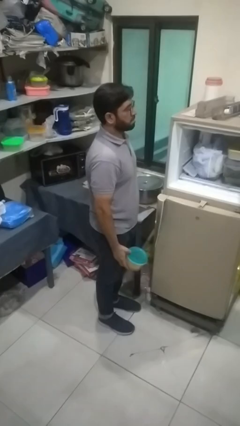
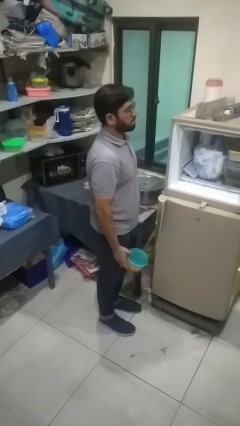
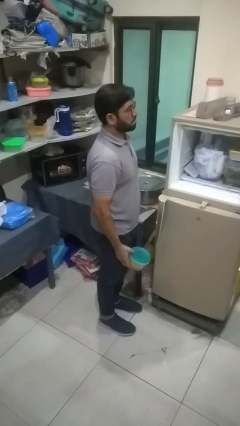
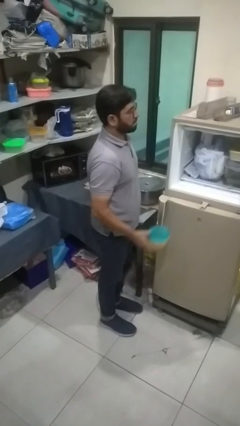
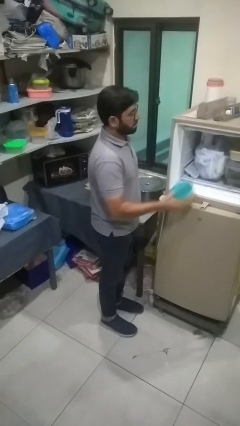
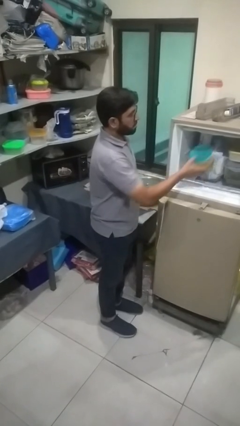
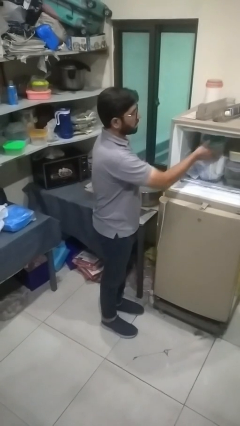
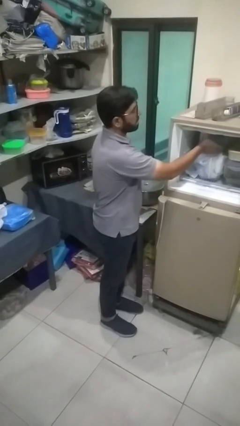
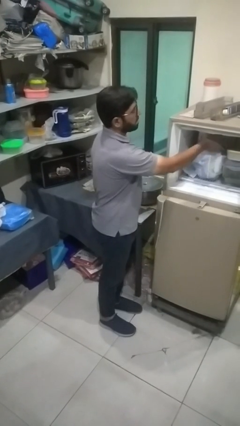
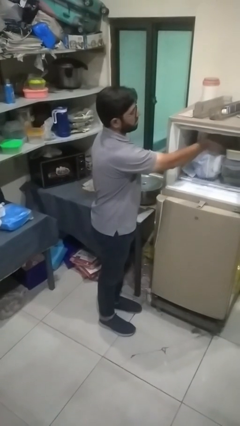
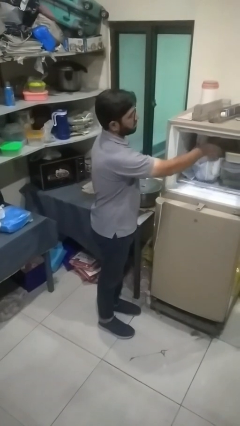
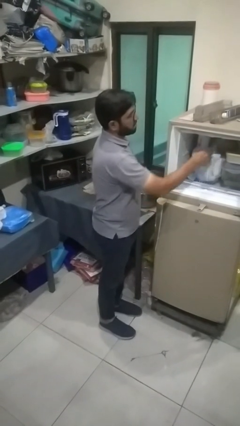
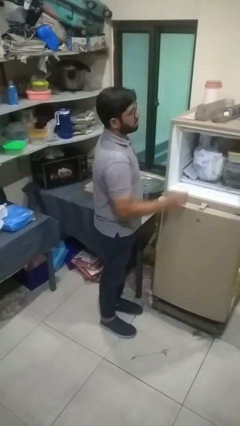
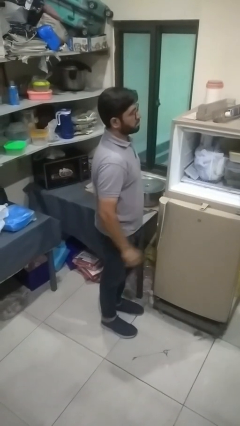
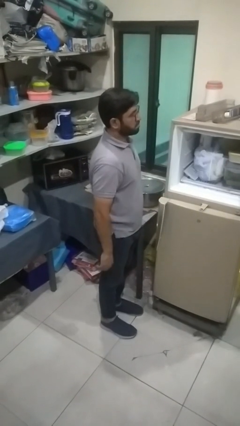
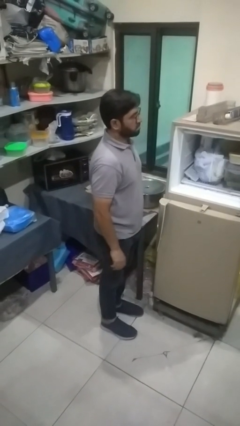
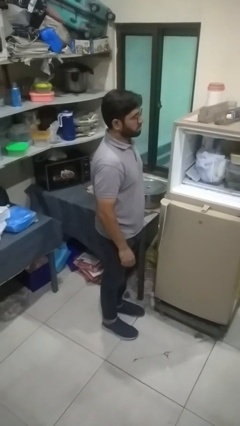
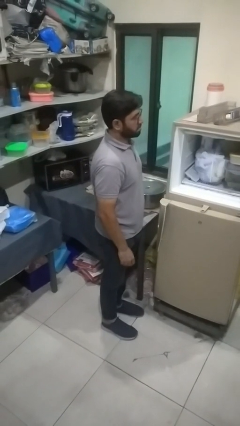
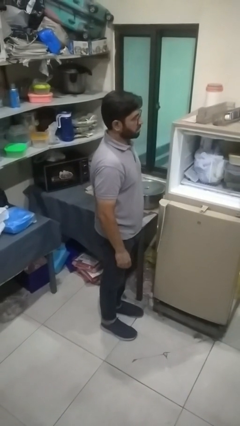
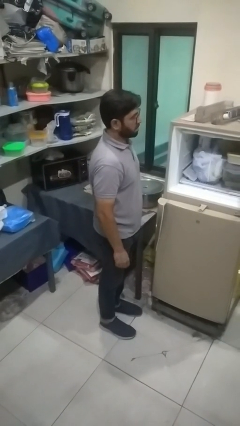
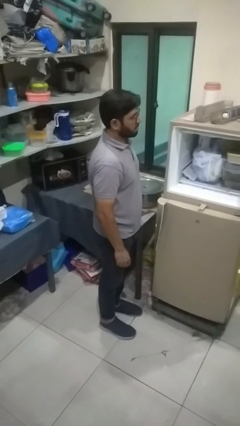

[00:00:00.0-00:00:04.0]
person puts object into refrigerator

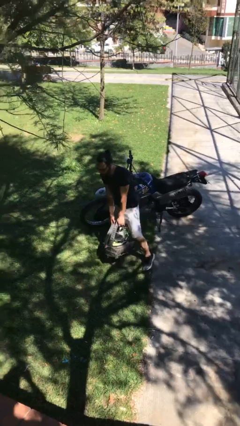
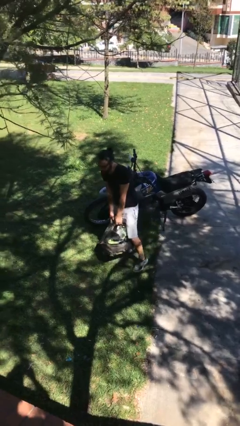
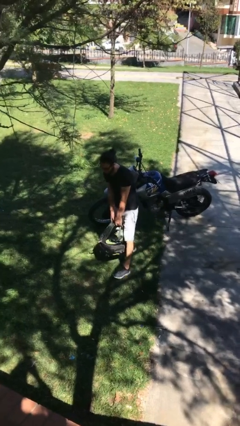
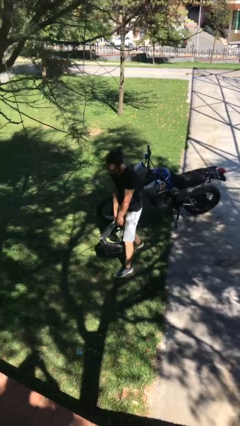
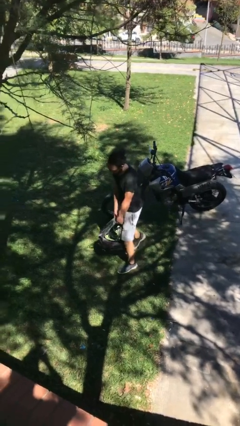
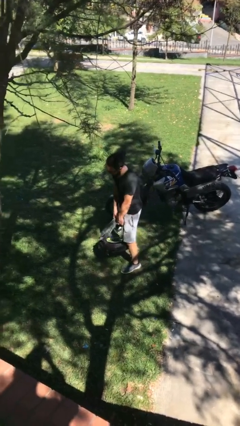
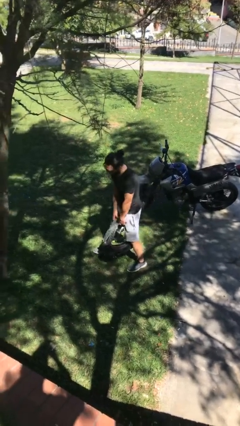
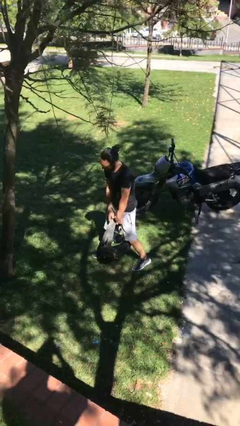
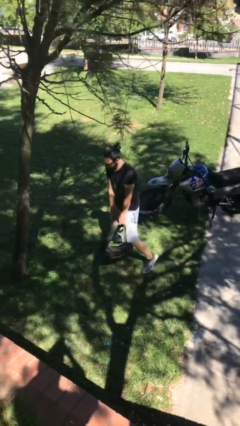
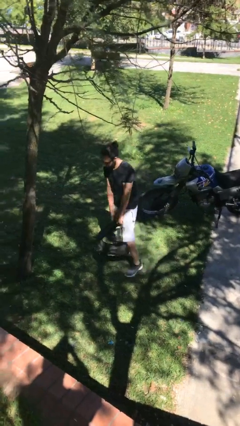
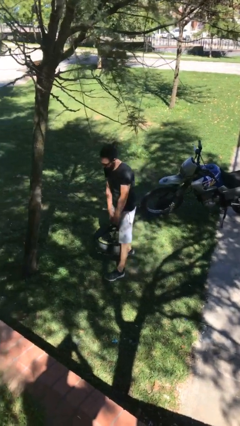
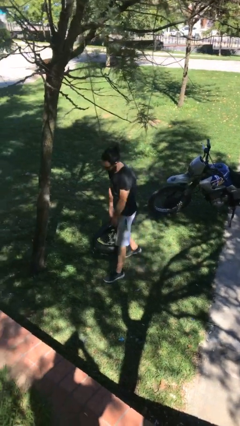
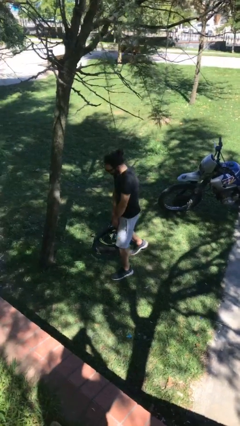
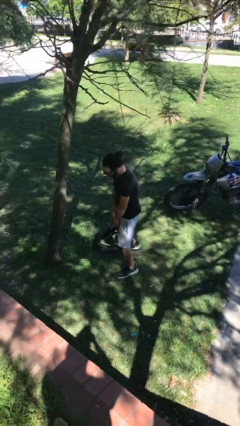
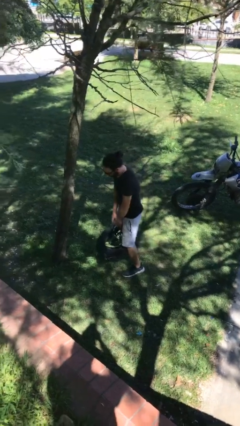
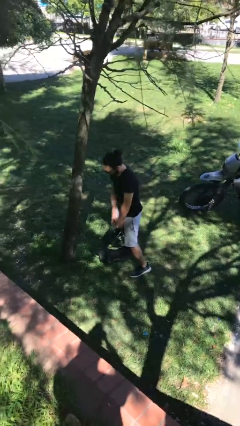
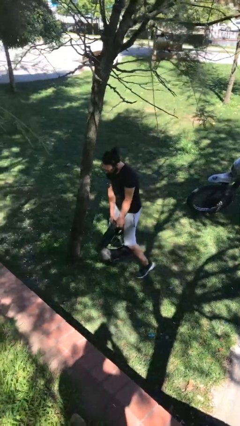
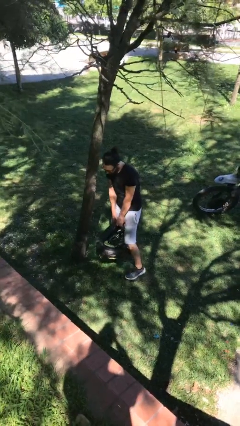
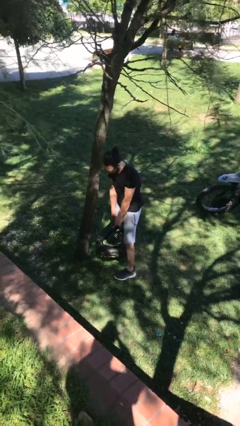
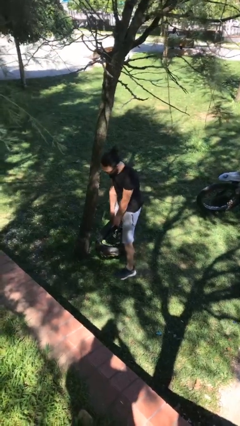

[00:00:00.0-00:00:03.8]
person carries heavy object

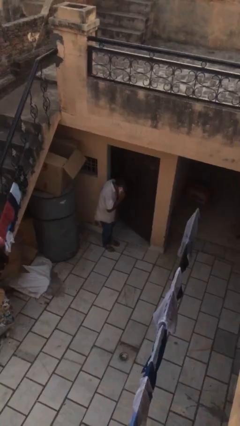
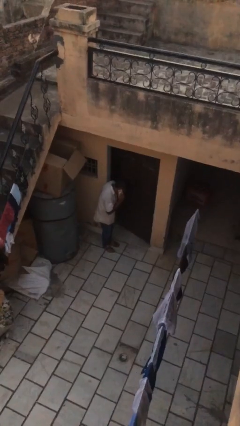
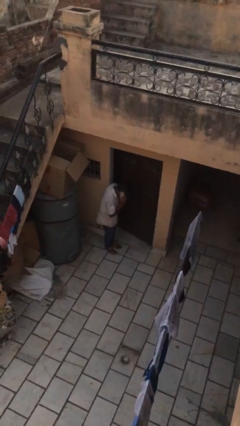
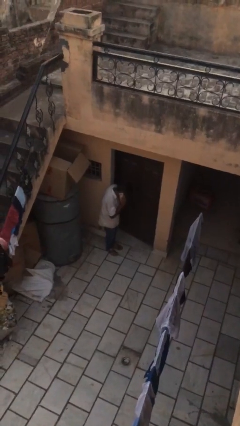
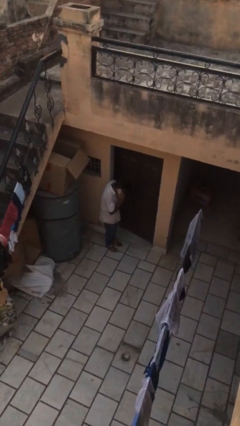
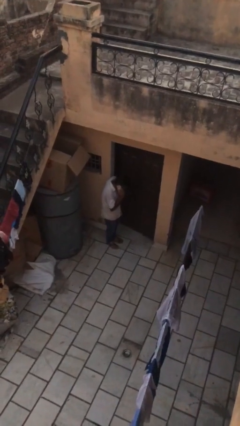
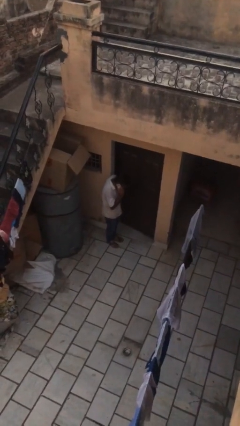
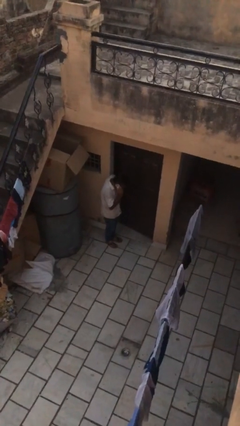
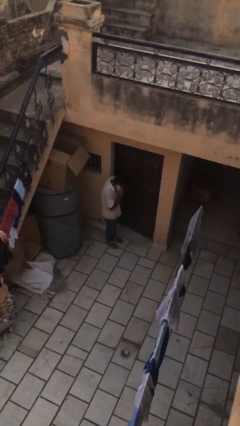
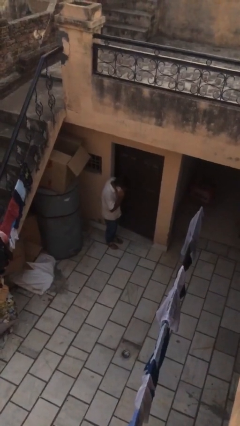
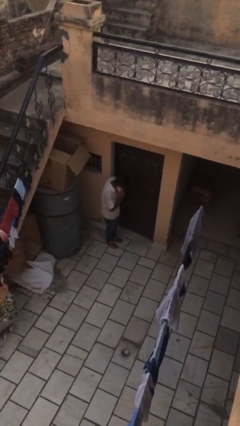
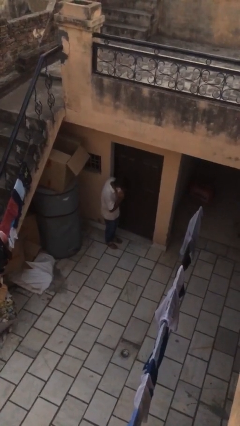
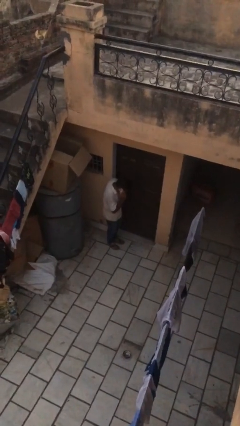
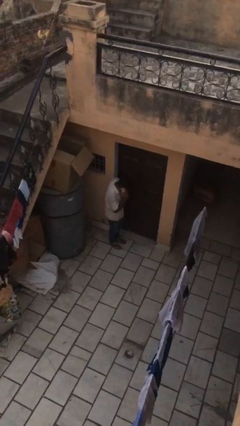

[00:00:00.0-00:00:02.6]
person closes facility door

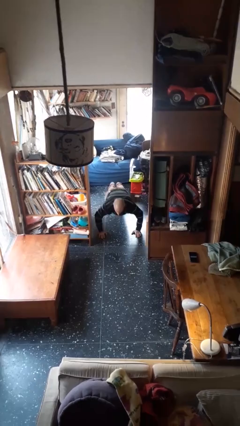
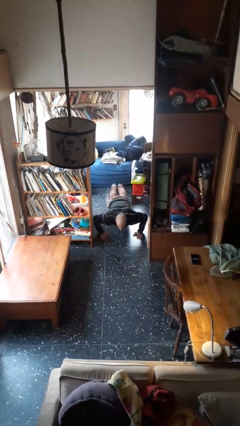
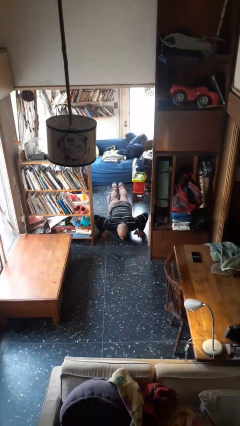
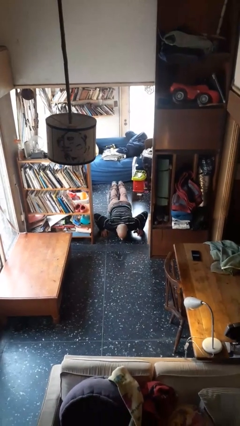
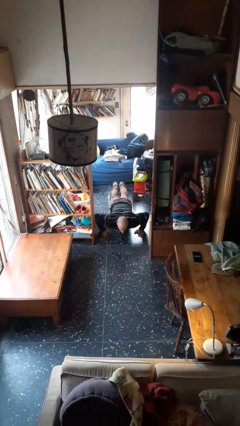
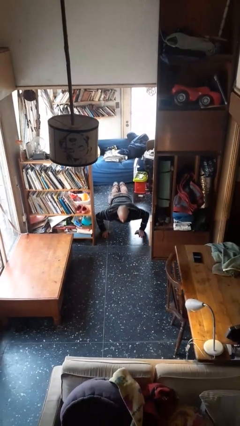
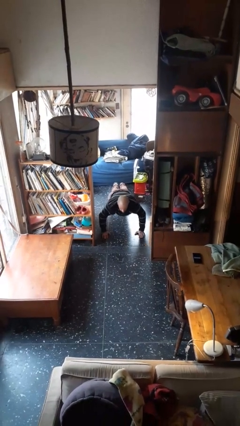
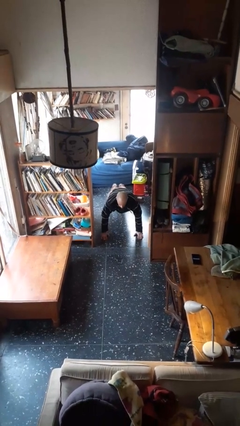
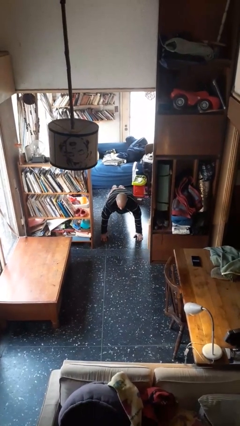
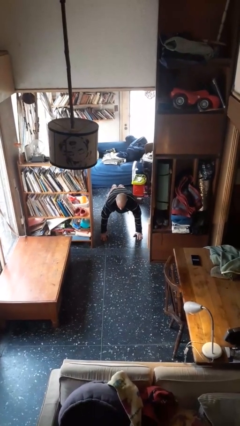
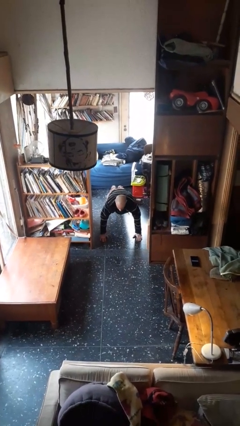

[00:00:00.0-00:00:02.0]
person exercises with pushup

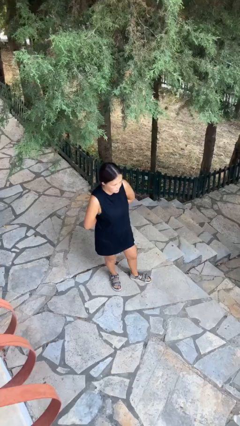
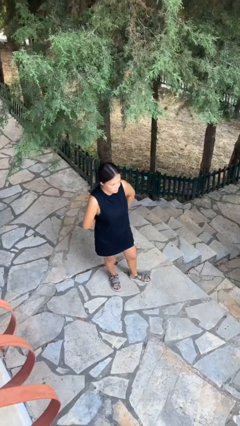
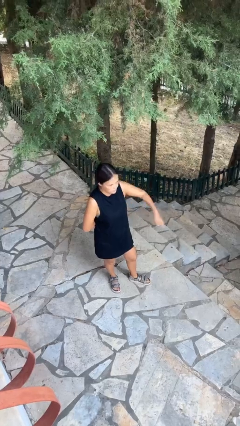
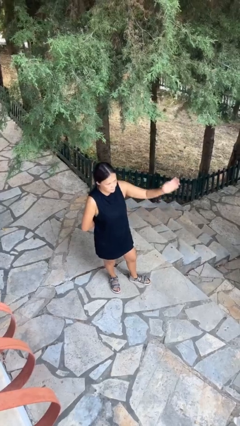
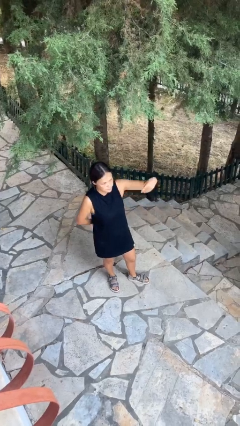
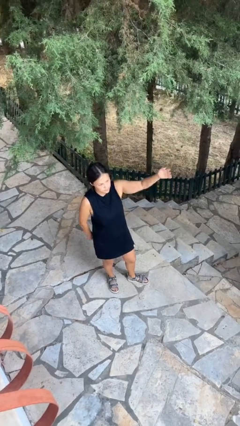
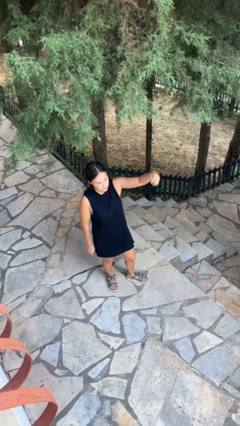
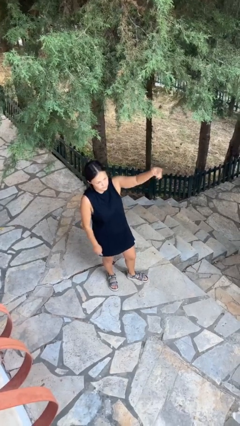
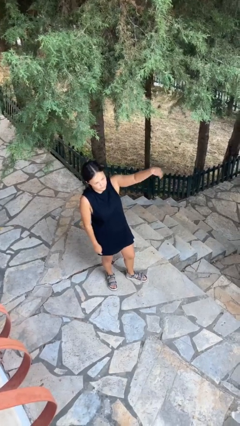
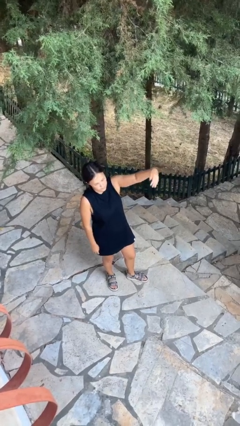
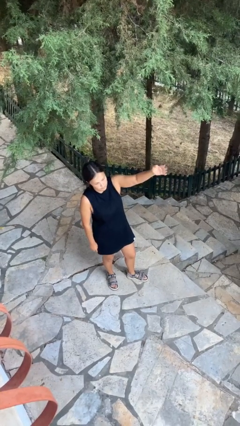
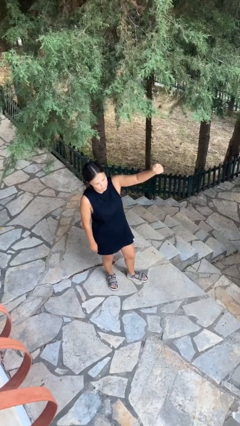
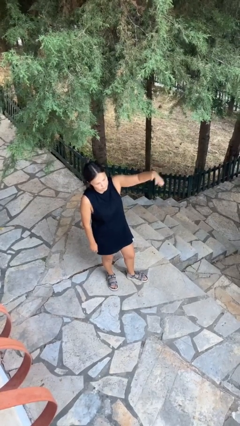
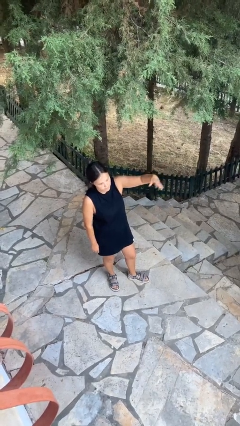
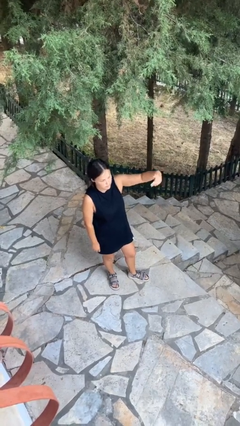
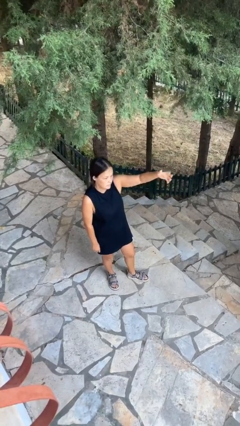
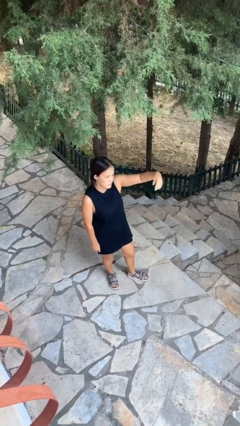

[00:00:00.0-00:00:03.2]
person gestures come here

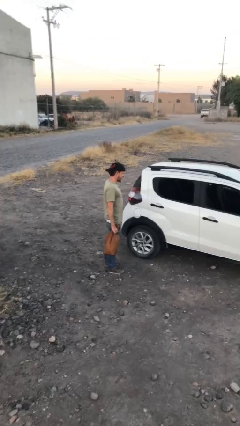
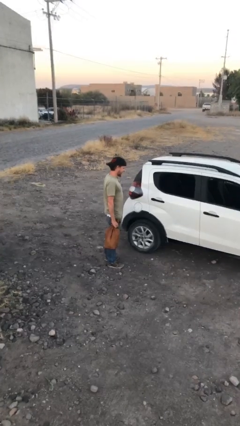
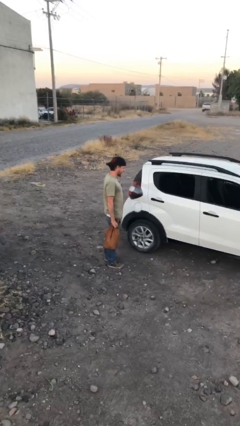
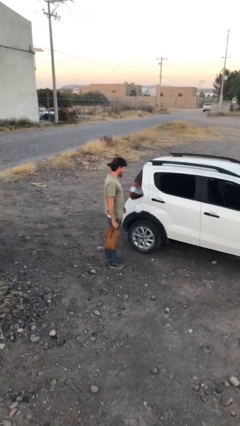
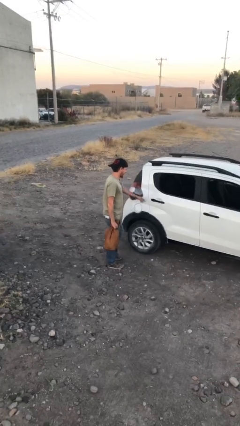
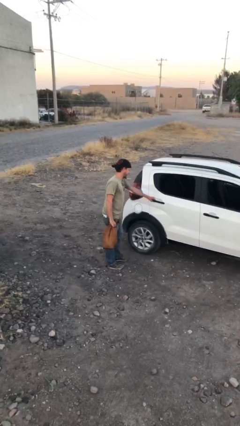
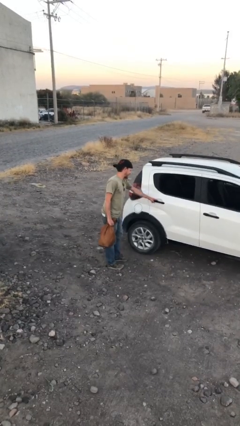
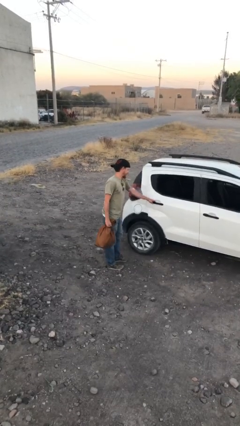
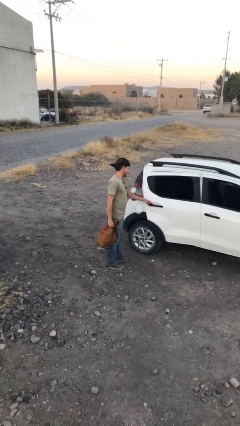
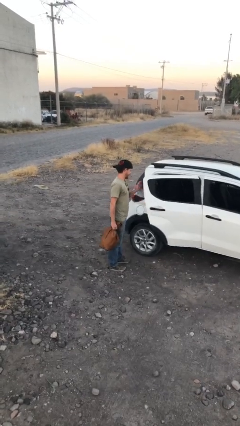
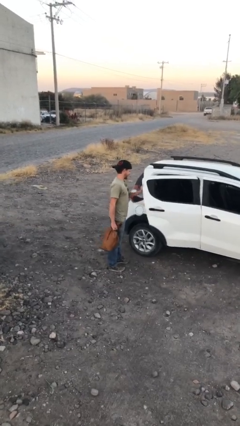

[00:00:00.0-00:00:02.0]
person opens car door
